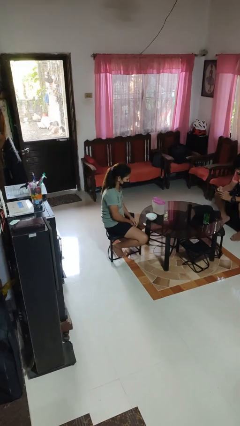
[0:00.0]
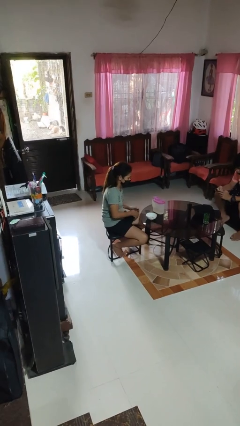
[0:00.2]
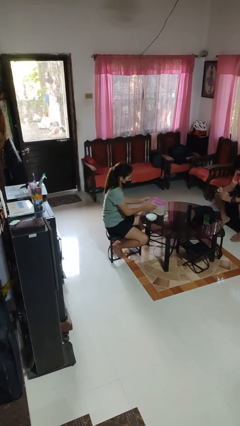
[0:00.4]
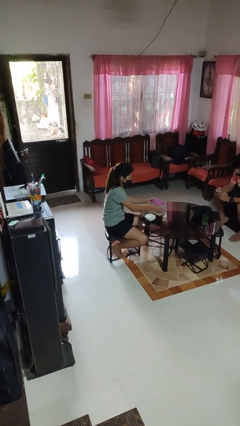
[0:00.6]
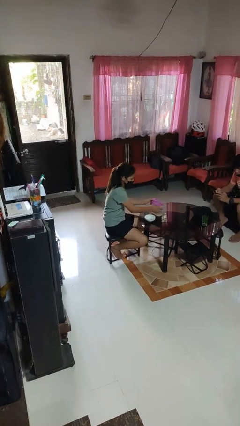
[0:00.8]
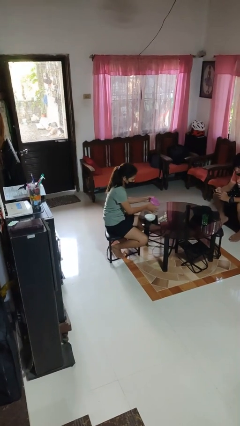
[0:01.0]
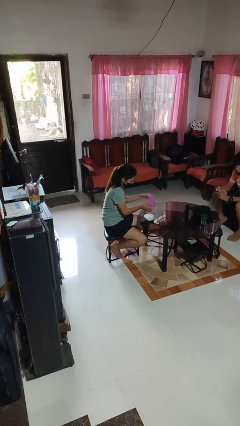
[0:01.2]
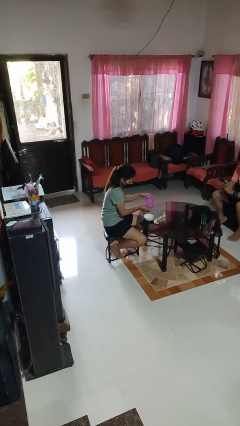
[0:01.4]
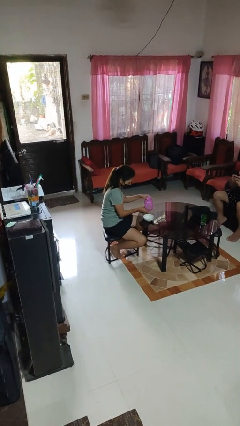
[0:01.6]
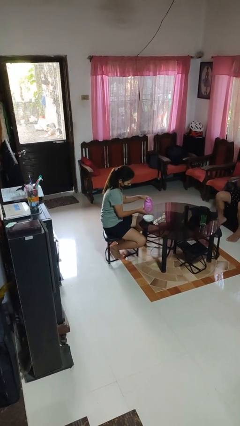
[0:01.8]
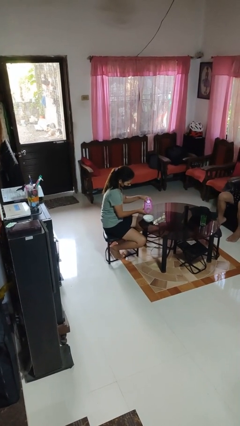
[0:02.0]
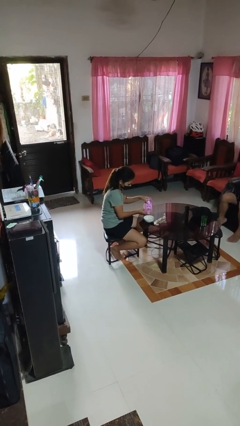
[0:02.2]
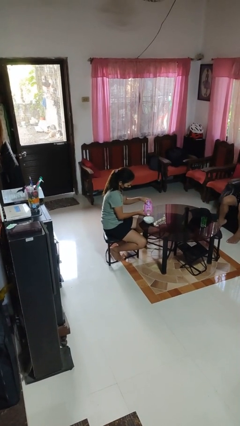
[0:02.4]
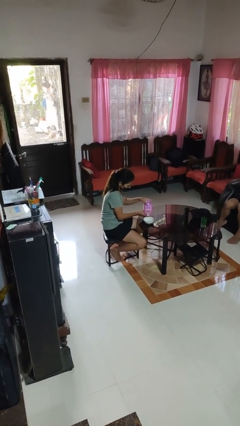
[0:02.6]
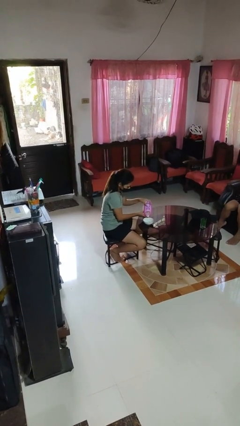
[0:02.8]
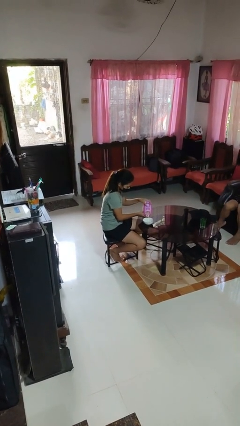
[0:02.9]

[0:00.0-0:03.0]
person pours into bowl

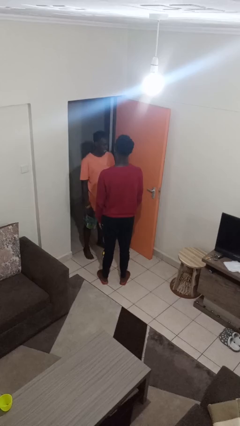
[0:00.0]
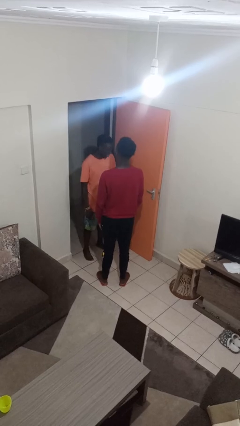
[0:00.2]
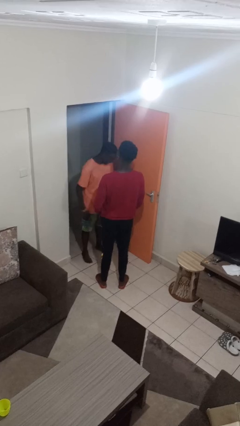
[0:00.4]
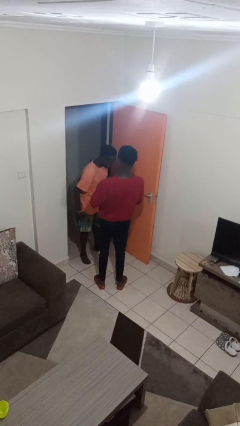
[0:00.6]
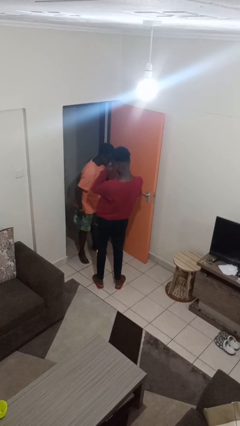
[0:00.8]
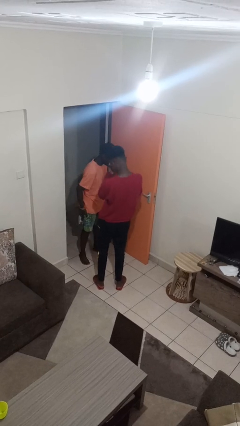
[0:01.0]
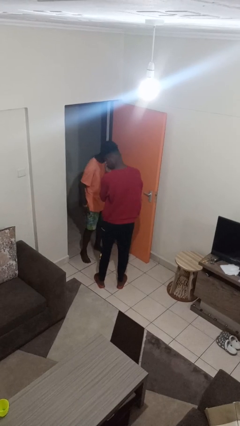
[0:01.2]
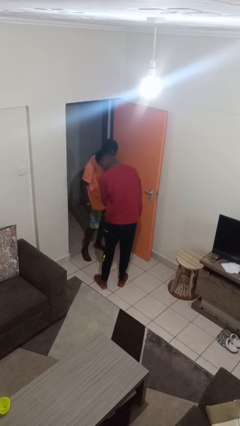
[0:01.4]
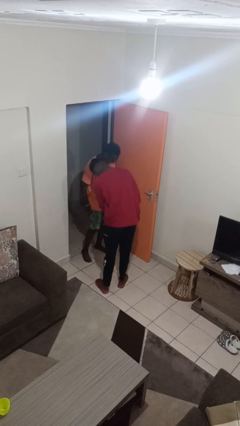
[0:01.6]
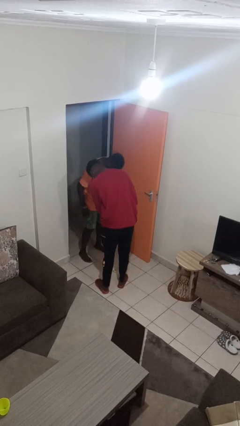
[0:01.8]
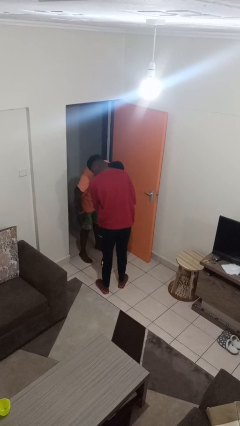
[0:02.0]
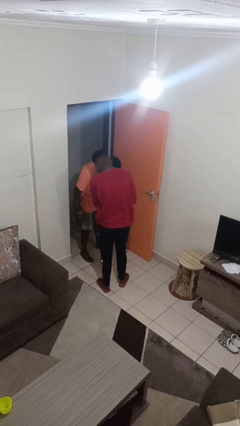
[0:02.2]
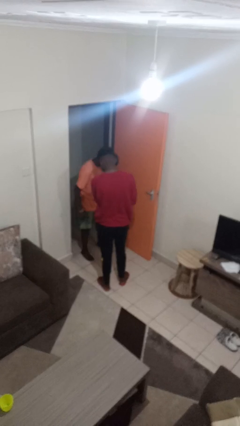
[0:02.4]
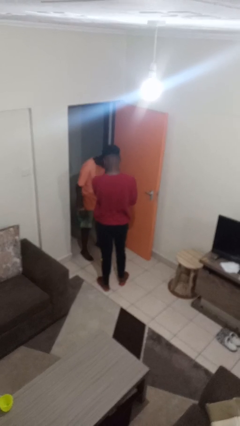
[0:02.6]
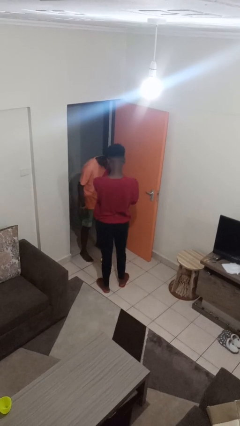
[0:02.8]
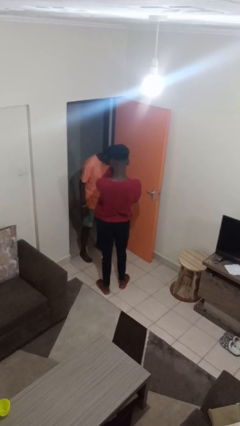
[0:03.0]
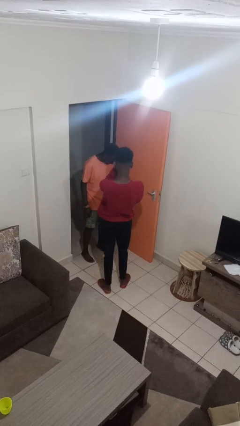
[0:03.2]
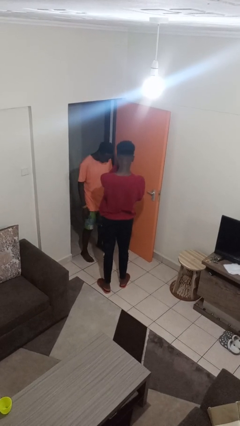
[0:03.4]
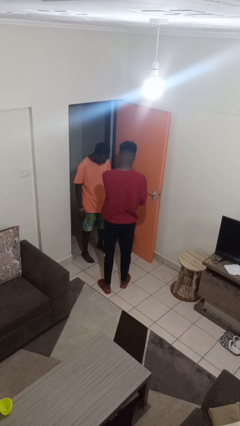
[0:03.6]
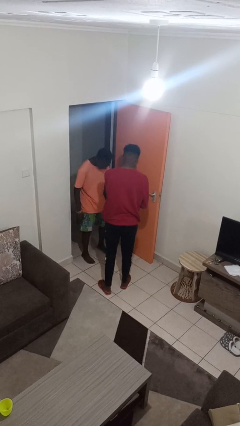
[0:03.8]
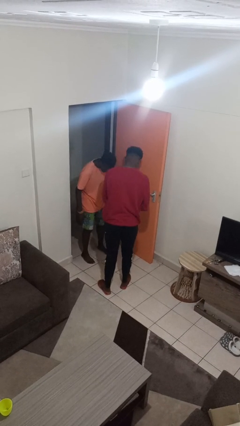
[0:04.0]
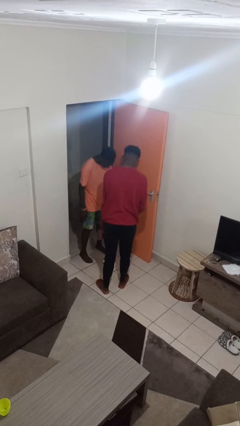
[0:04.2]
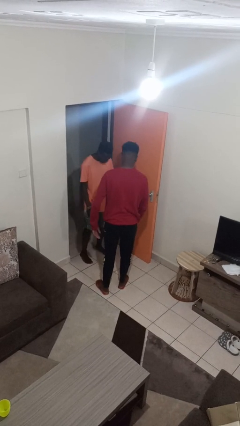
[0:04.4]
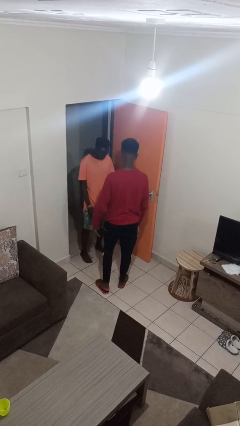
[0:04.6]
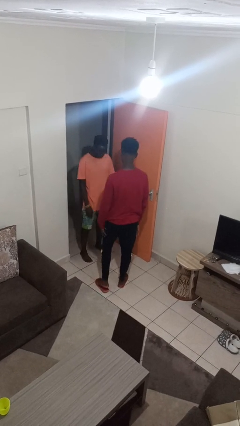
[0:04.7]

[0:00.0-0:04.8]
person laughs with person

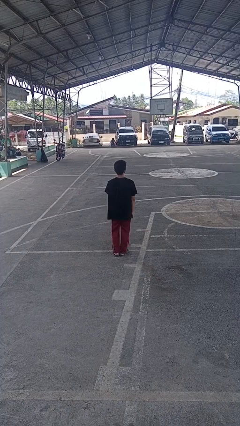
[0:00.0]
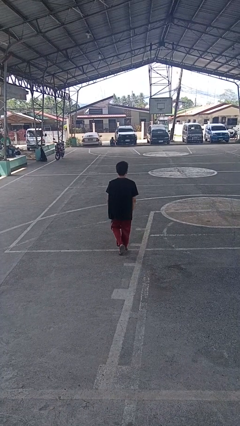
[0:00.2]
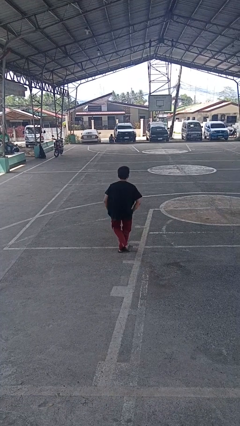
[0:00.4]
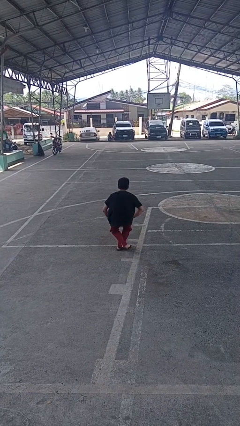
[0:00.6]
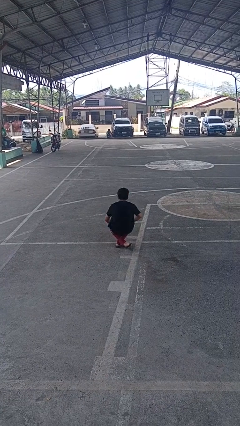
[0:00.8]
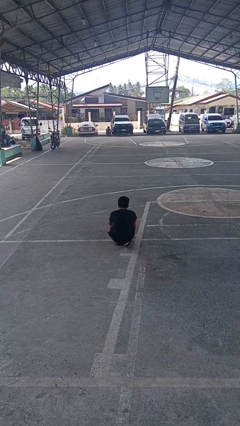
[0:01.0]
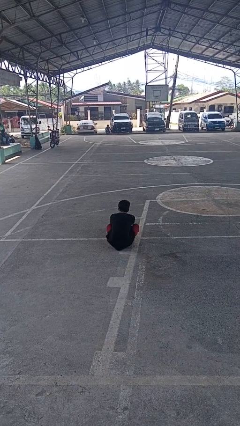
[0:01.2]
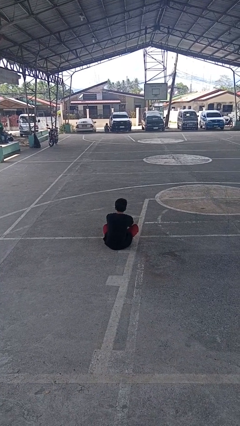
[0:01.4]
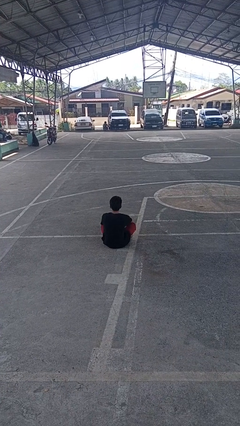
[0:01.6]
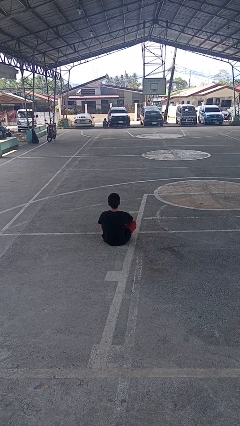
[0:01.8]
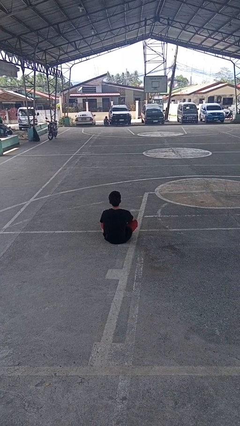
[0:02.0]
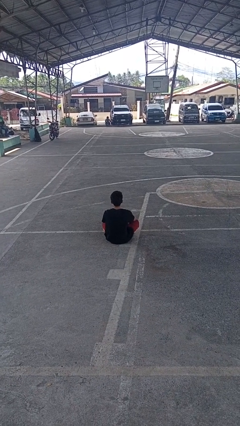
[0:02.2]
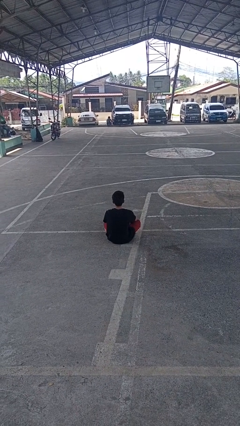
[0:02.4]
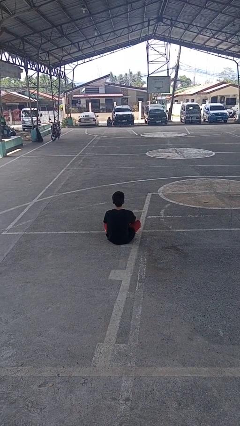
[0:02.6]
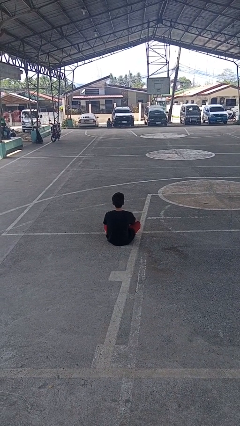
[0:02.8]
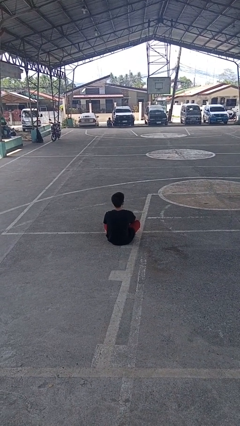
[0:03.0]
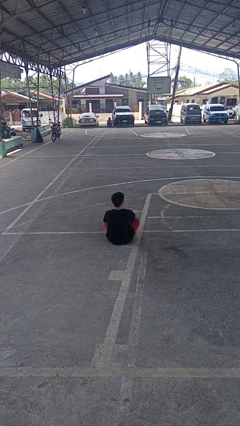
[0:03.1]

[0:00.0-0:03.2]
person sits crisscross

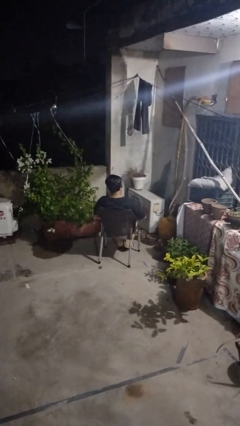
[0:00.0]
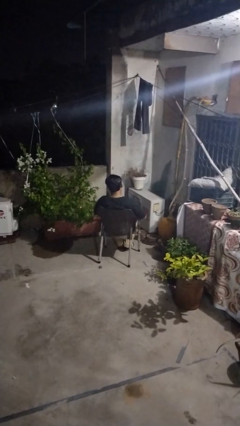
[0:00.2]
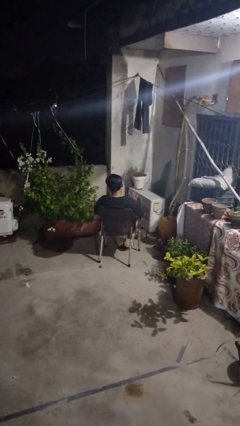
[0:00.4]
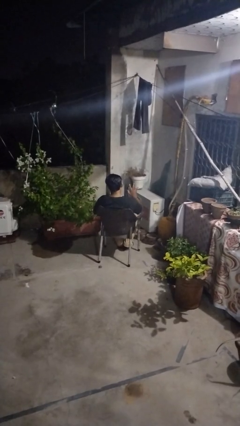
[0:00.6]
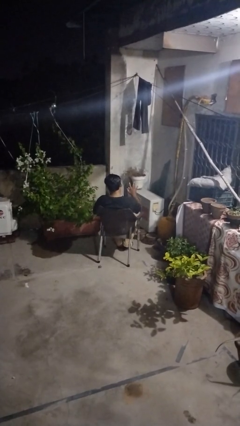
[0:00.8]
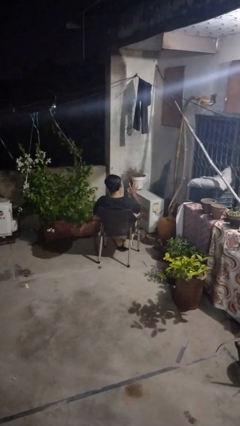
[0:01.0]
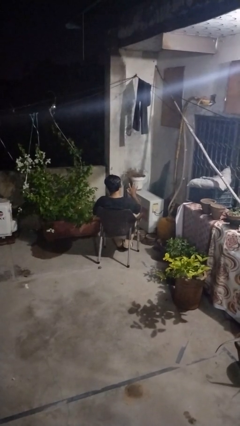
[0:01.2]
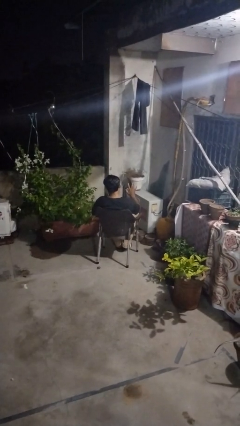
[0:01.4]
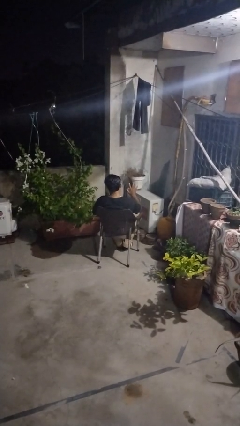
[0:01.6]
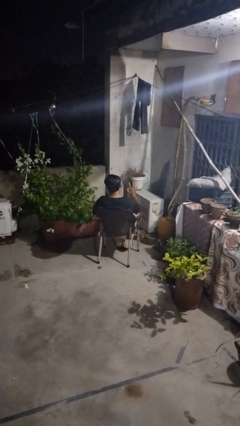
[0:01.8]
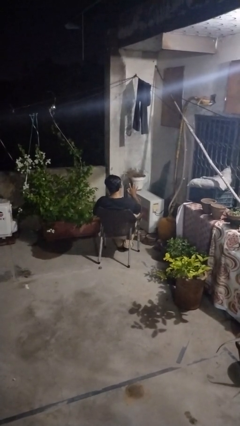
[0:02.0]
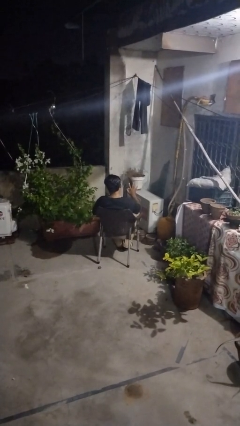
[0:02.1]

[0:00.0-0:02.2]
person gestures number five

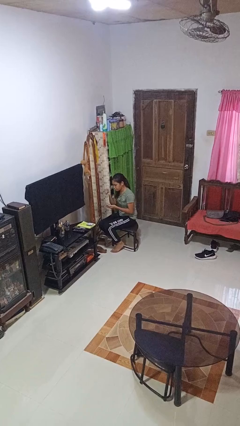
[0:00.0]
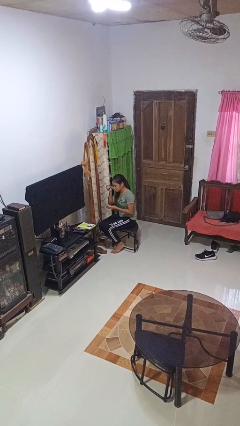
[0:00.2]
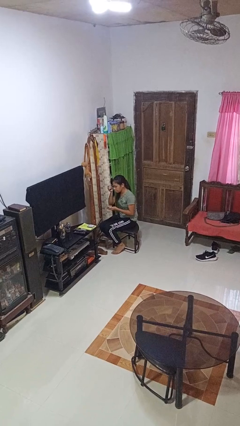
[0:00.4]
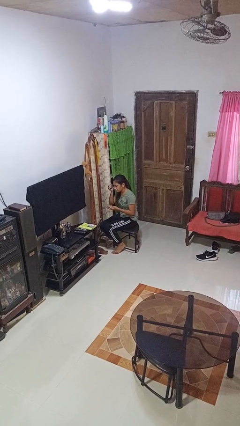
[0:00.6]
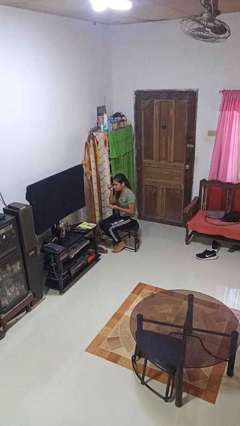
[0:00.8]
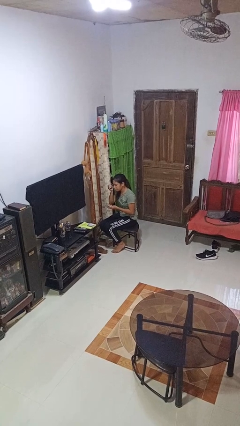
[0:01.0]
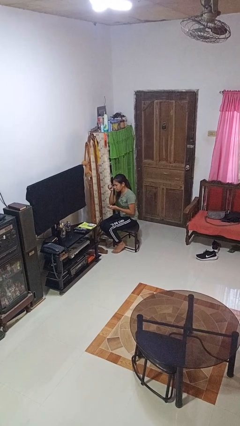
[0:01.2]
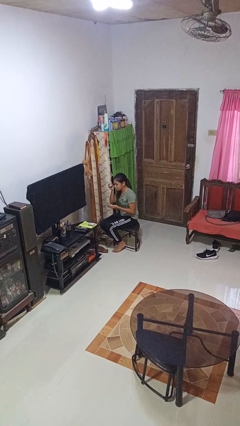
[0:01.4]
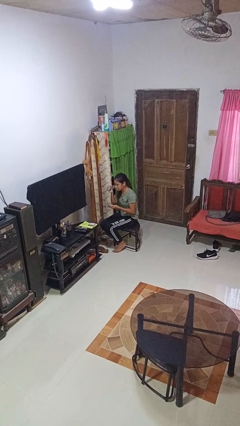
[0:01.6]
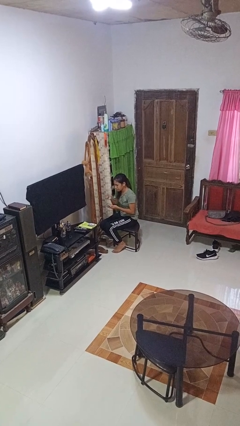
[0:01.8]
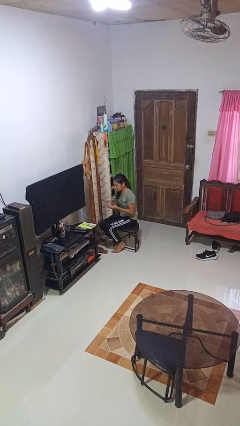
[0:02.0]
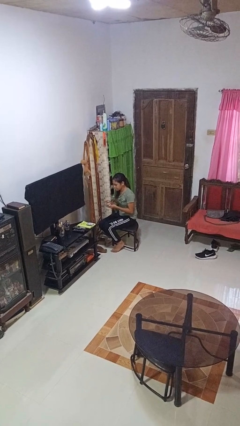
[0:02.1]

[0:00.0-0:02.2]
person applies eye makeup

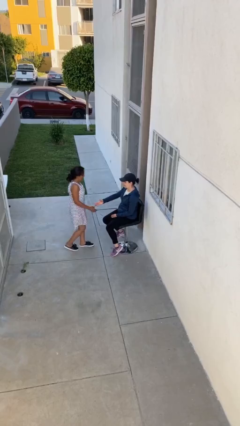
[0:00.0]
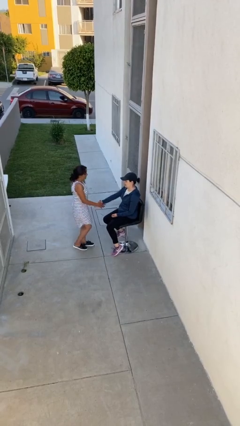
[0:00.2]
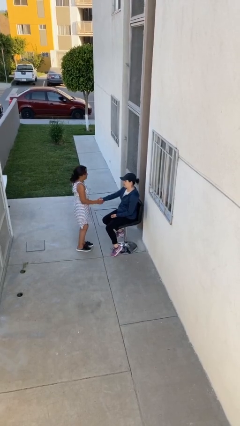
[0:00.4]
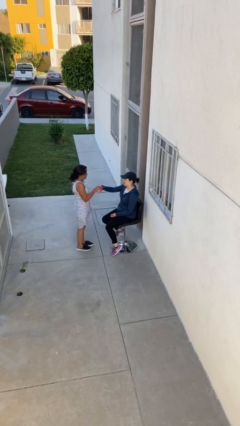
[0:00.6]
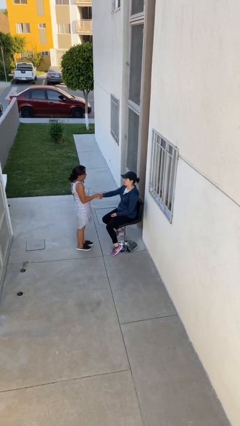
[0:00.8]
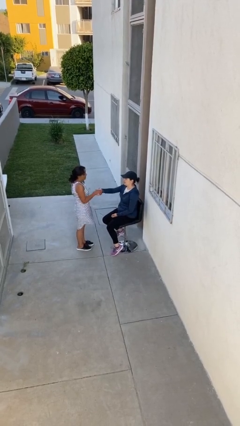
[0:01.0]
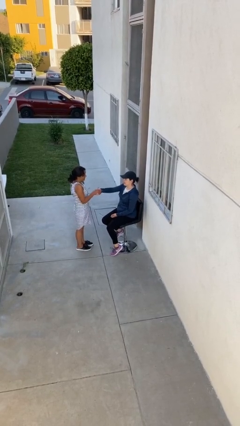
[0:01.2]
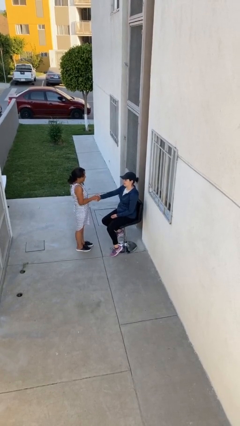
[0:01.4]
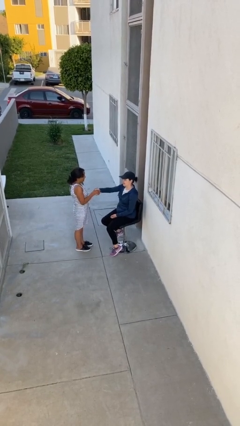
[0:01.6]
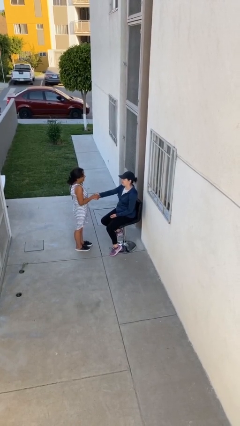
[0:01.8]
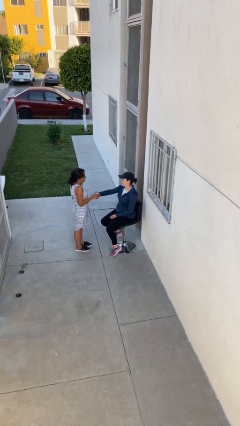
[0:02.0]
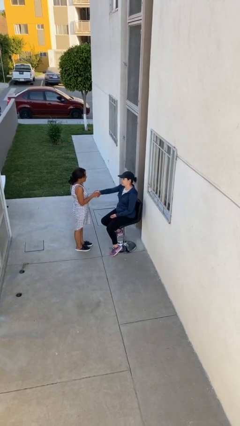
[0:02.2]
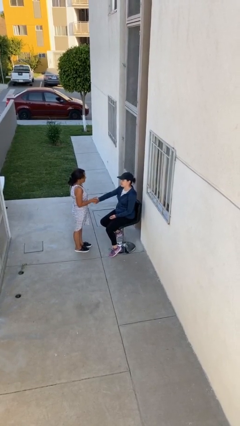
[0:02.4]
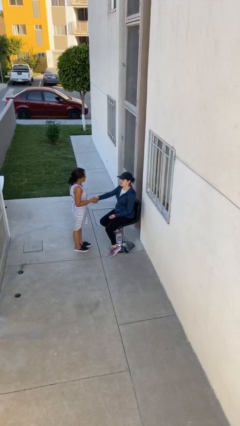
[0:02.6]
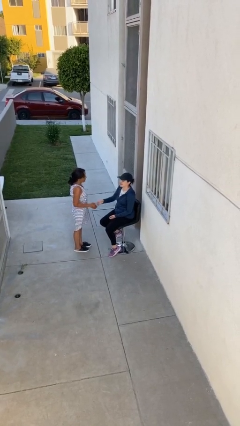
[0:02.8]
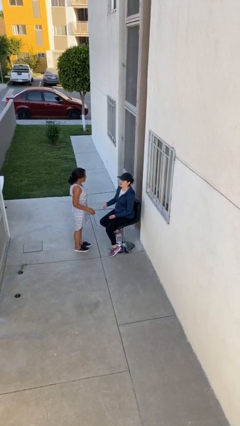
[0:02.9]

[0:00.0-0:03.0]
person shakes hand
